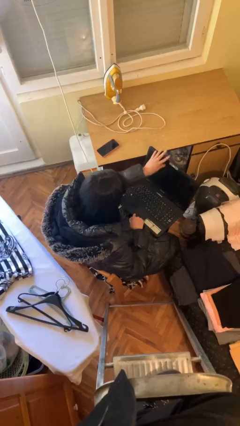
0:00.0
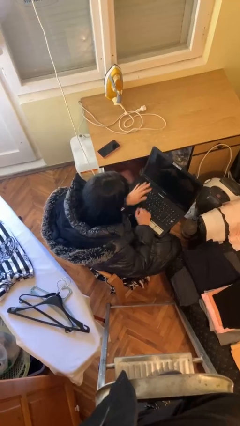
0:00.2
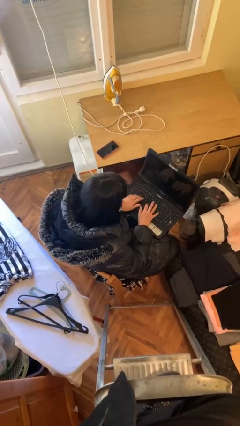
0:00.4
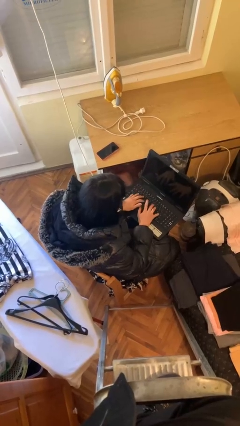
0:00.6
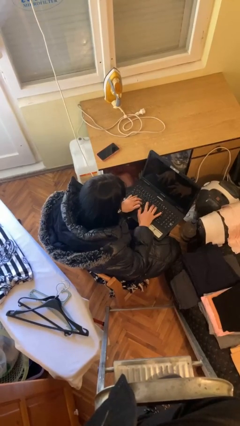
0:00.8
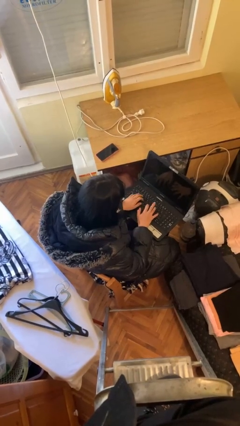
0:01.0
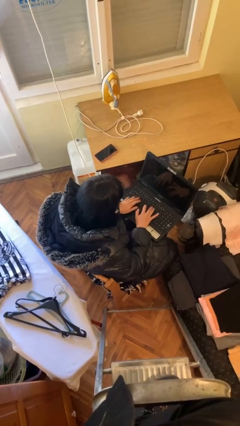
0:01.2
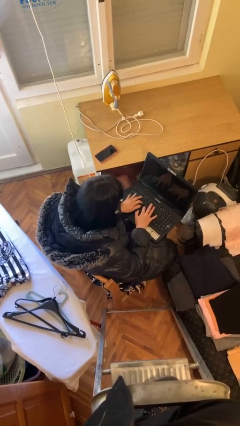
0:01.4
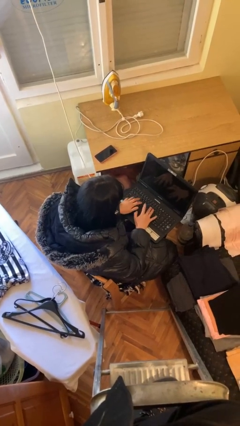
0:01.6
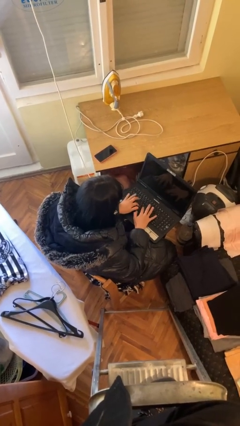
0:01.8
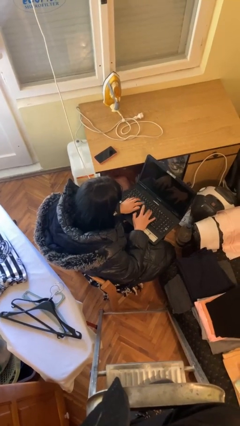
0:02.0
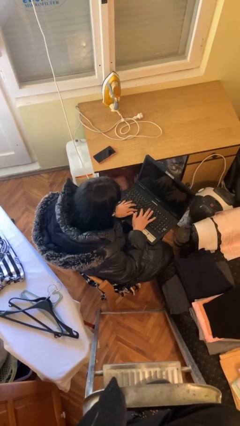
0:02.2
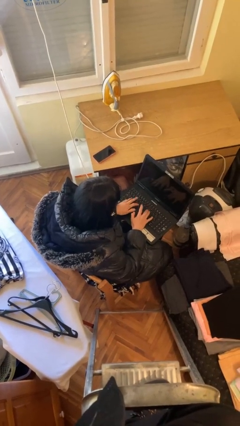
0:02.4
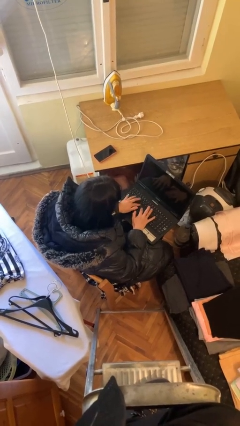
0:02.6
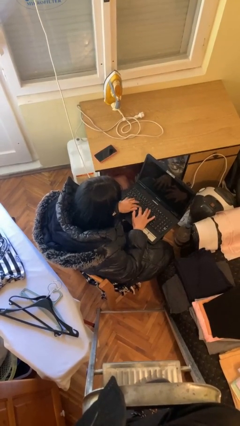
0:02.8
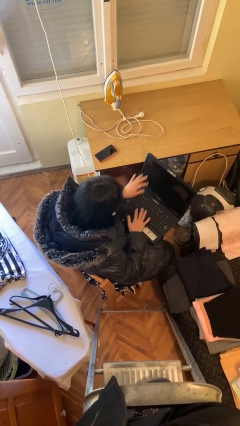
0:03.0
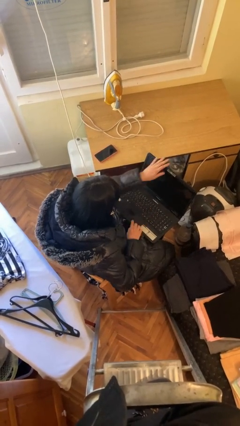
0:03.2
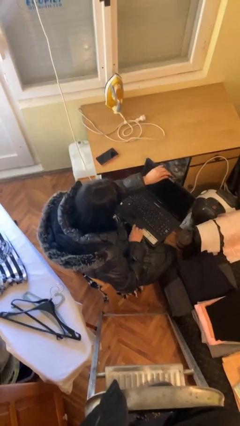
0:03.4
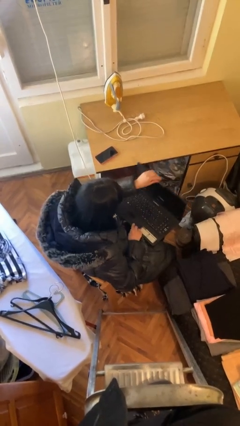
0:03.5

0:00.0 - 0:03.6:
person interacts with laptop

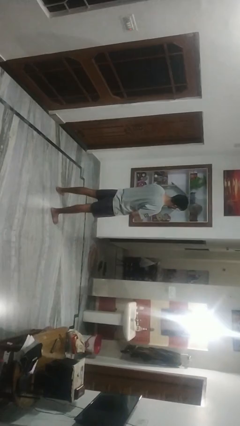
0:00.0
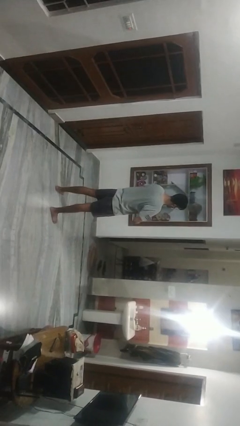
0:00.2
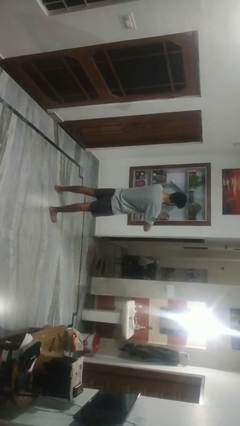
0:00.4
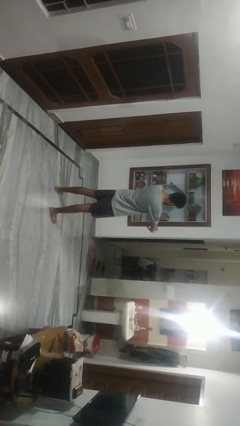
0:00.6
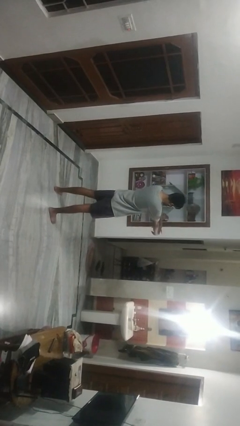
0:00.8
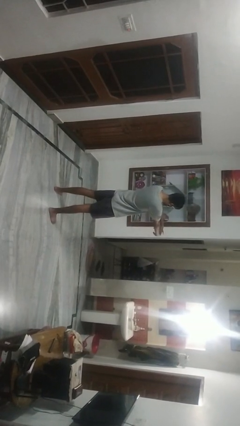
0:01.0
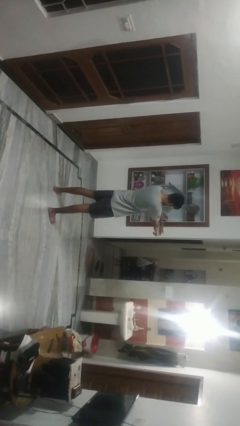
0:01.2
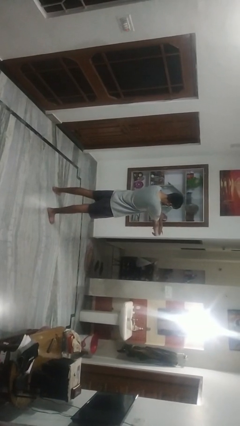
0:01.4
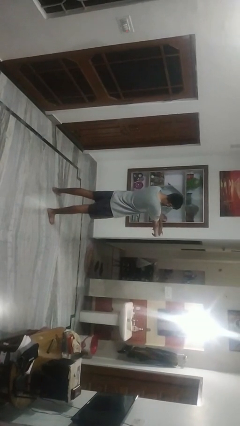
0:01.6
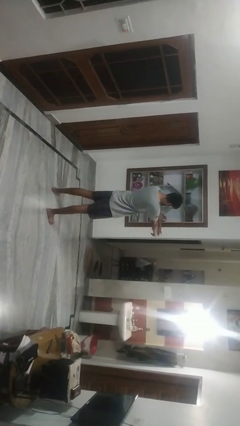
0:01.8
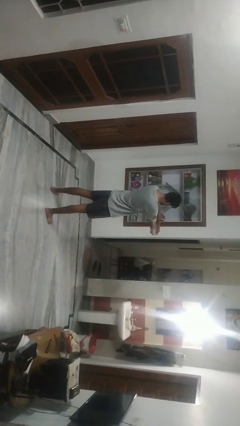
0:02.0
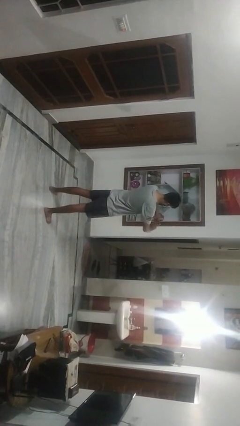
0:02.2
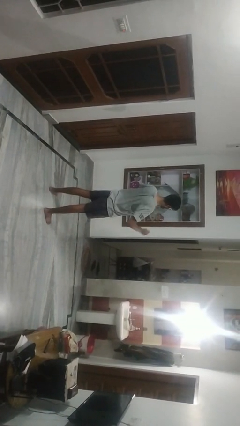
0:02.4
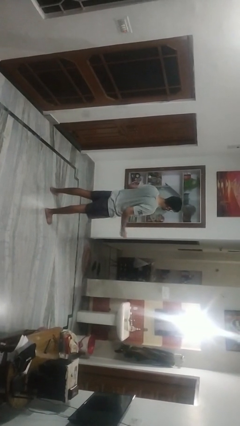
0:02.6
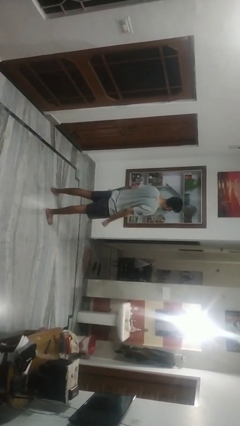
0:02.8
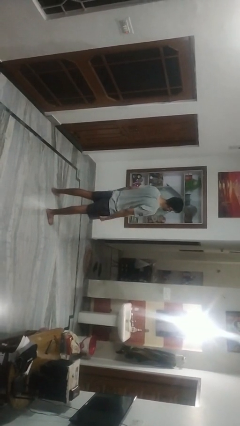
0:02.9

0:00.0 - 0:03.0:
person cracks knuckles

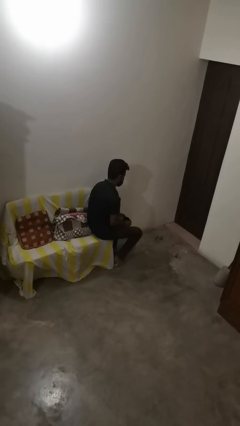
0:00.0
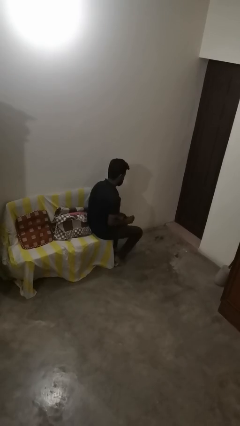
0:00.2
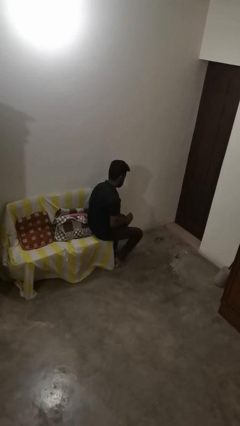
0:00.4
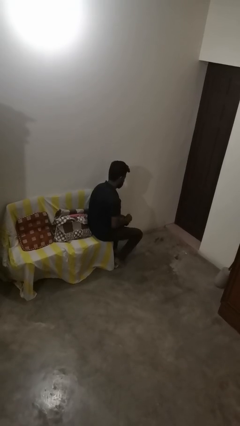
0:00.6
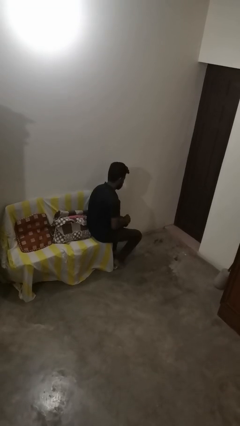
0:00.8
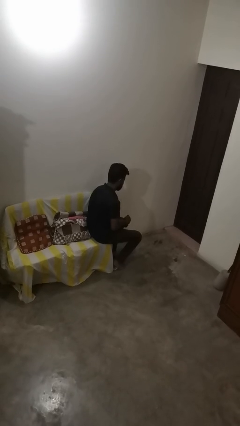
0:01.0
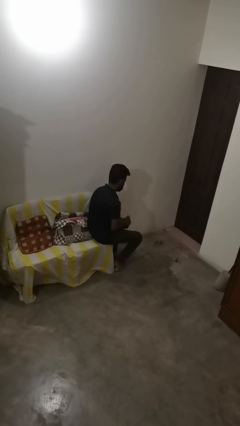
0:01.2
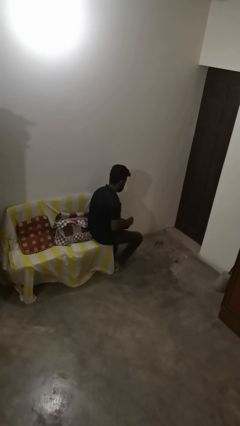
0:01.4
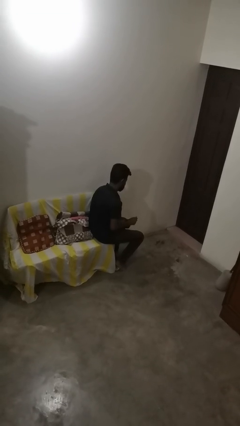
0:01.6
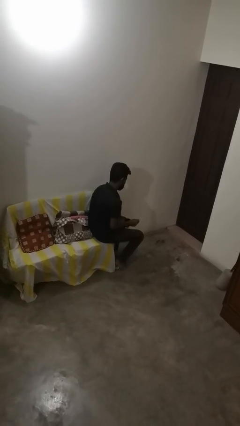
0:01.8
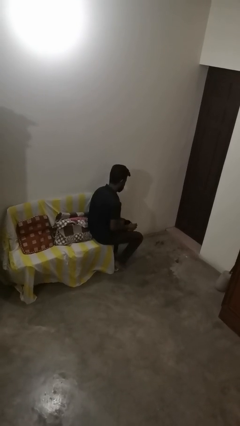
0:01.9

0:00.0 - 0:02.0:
person stirs mug

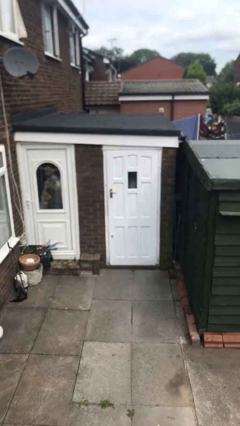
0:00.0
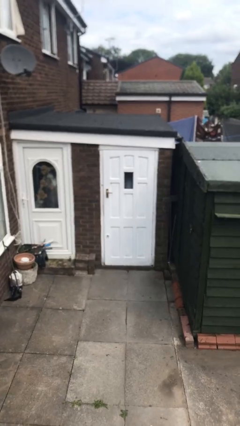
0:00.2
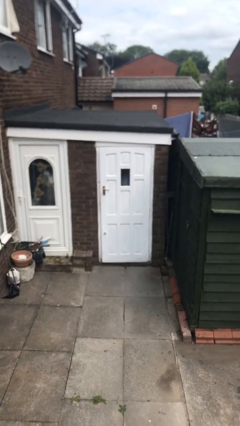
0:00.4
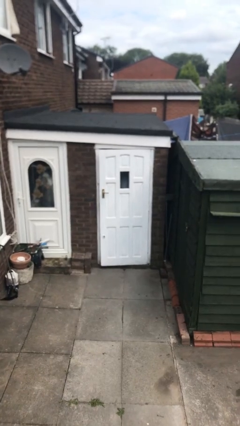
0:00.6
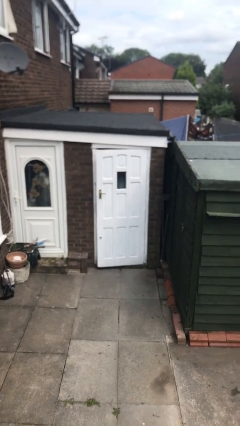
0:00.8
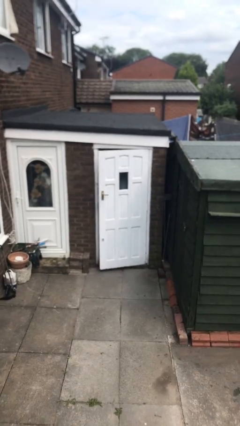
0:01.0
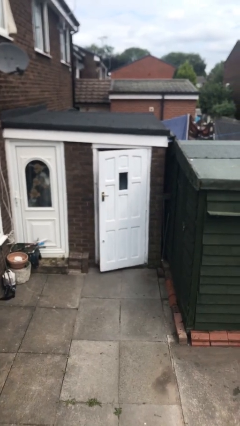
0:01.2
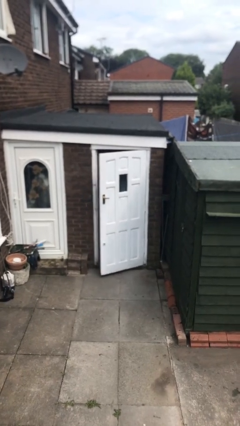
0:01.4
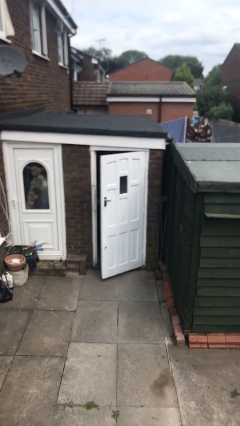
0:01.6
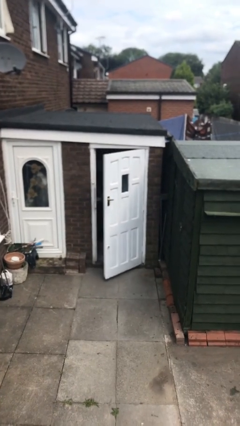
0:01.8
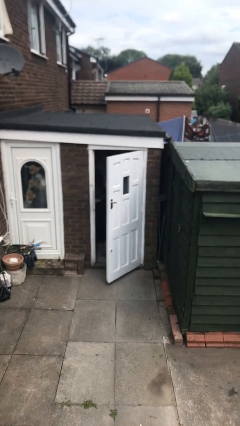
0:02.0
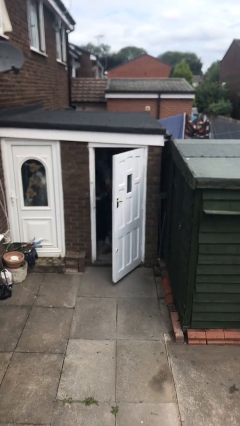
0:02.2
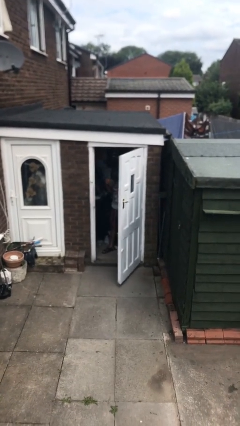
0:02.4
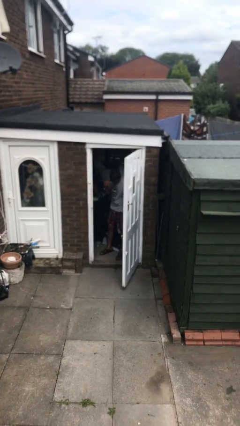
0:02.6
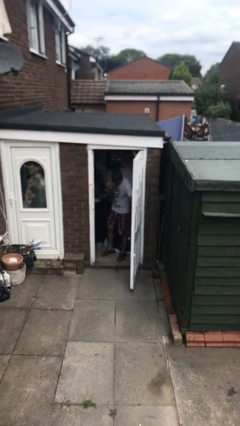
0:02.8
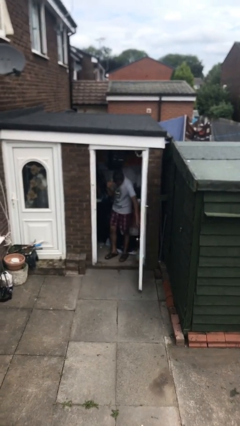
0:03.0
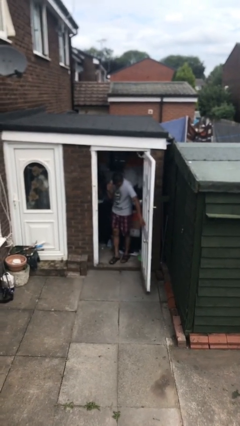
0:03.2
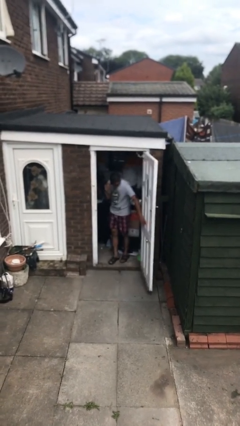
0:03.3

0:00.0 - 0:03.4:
person opens facility door

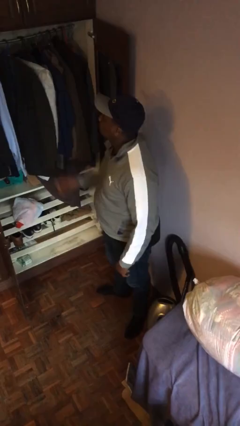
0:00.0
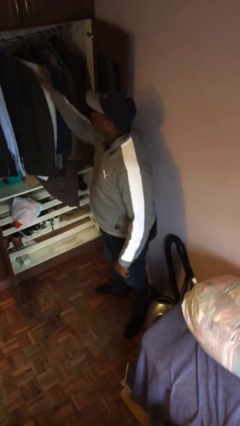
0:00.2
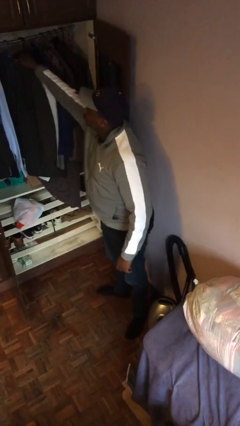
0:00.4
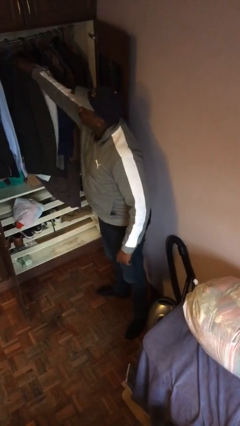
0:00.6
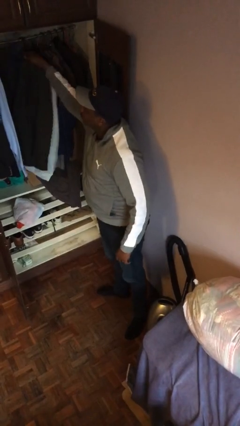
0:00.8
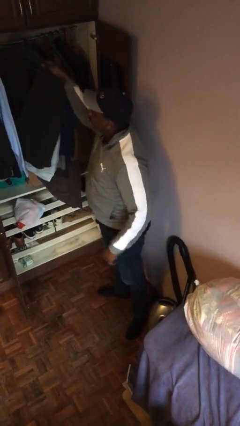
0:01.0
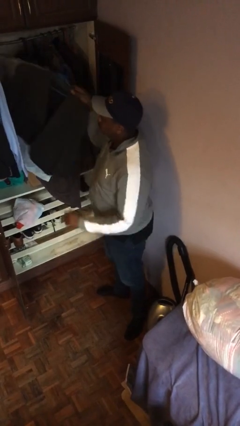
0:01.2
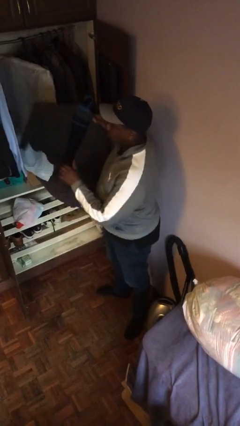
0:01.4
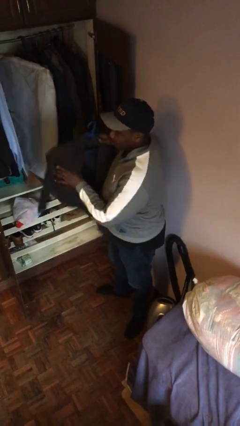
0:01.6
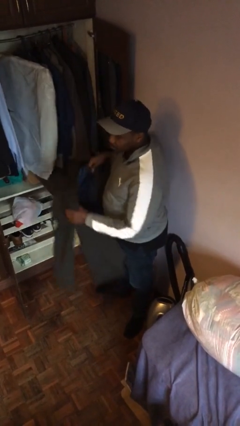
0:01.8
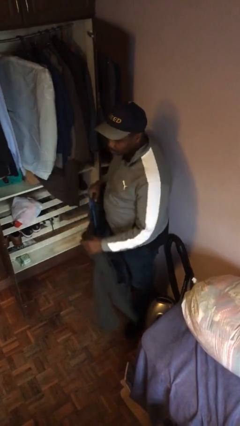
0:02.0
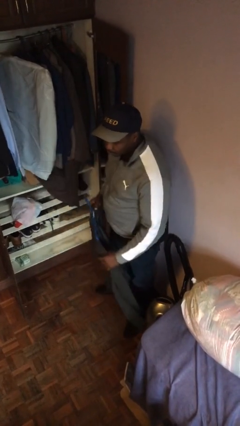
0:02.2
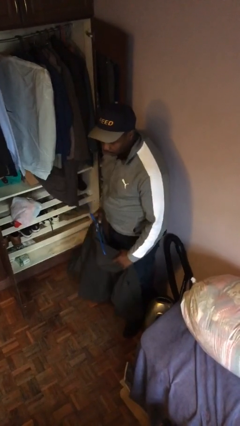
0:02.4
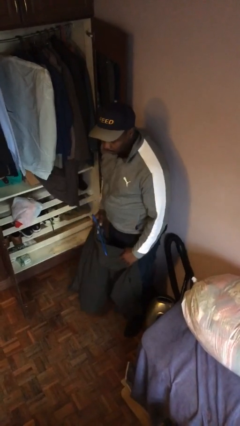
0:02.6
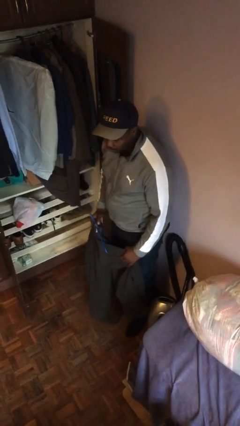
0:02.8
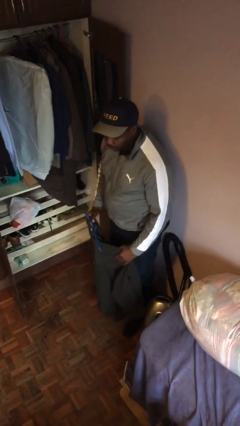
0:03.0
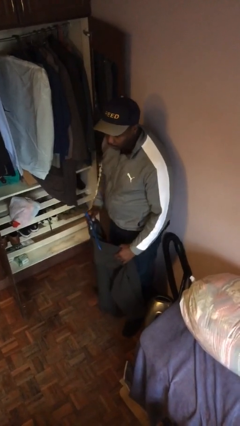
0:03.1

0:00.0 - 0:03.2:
person takes clothes from closet

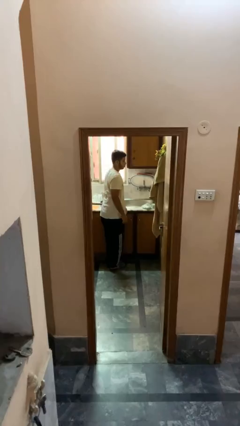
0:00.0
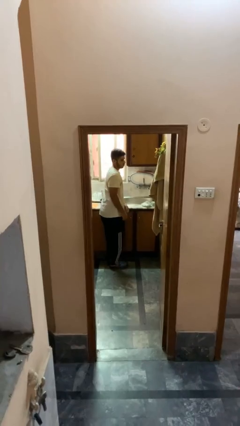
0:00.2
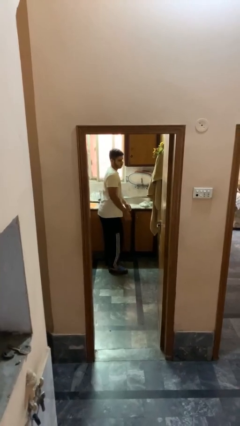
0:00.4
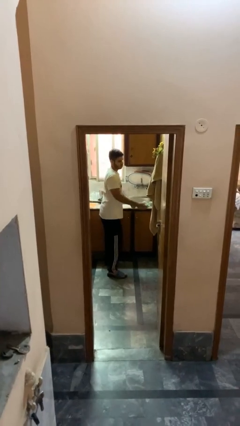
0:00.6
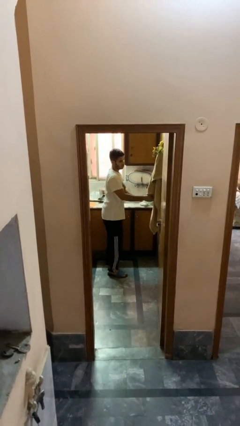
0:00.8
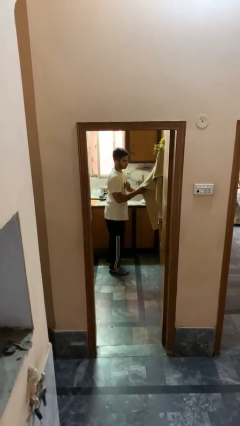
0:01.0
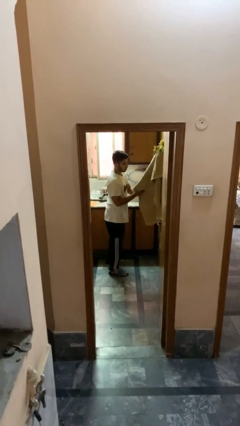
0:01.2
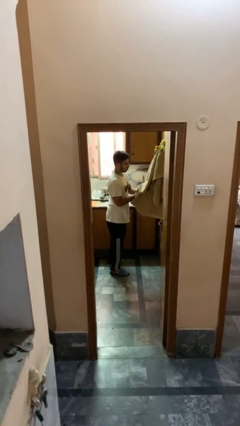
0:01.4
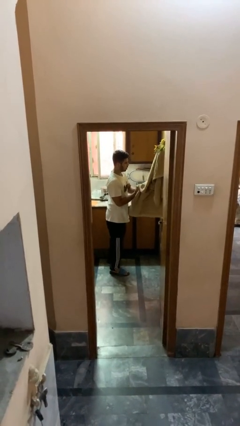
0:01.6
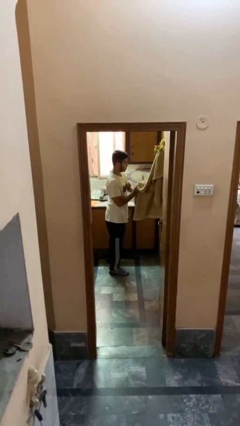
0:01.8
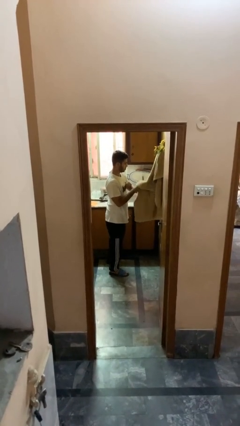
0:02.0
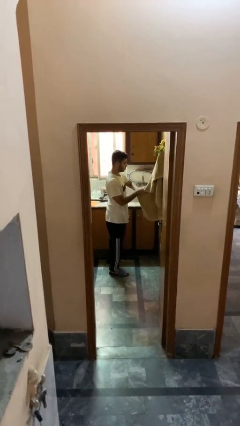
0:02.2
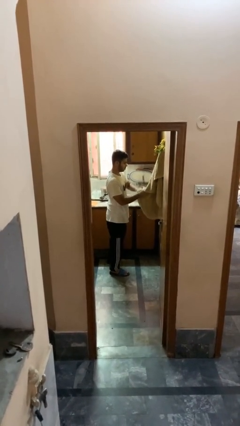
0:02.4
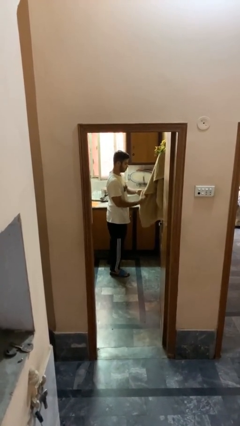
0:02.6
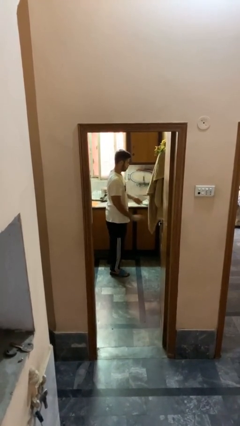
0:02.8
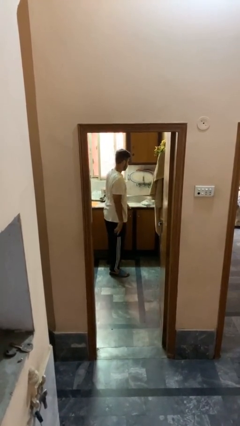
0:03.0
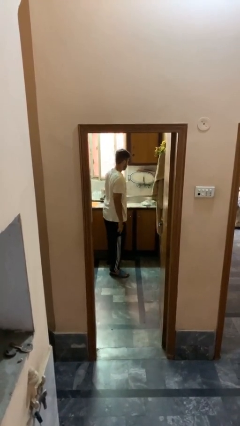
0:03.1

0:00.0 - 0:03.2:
person dries hands with towel
